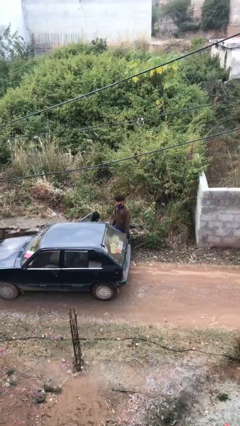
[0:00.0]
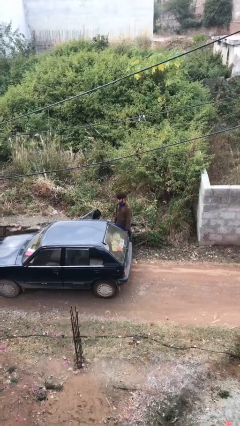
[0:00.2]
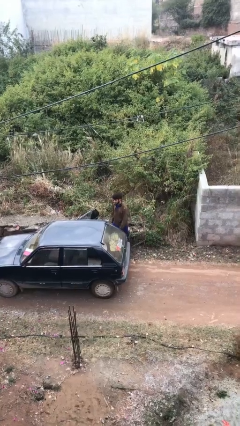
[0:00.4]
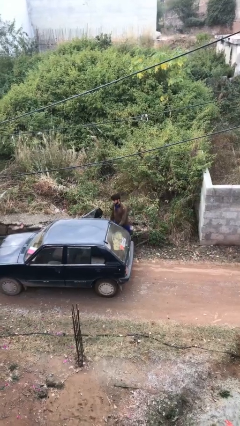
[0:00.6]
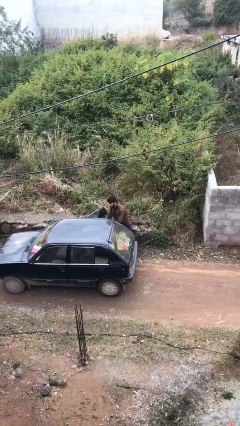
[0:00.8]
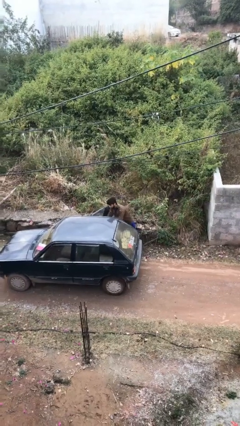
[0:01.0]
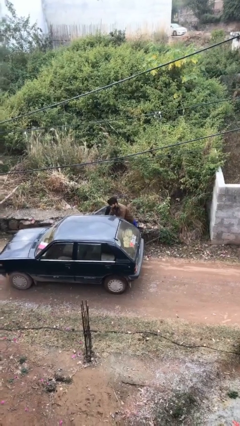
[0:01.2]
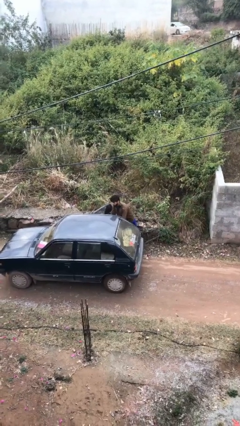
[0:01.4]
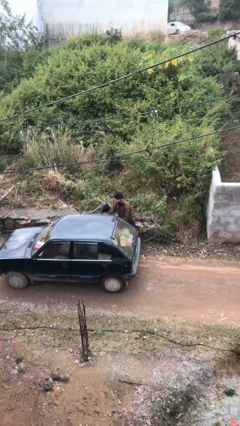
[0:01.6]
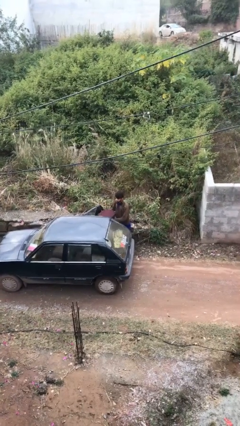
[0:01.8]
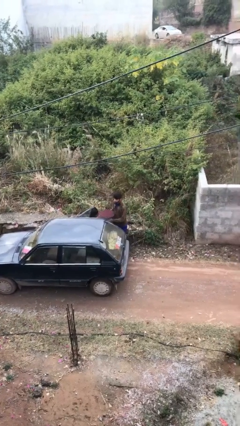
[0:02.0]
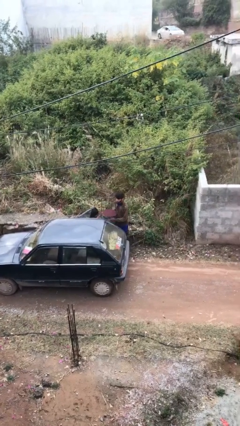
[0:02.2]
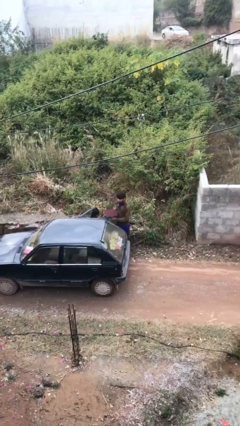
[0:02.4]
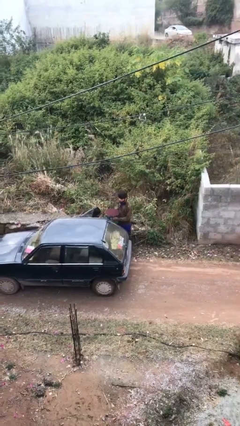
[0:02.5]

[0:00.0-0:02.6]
person unloads car

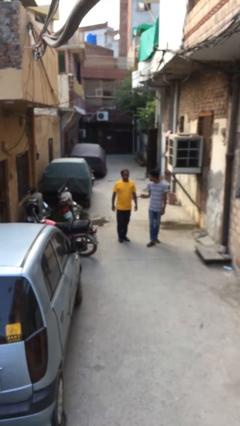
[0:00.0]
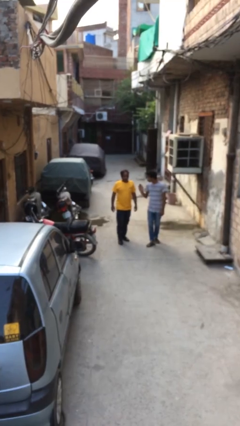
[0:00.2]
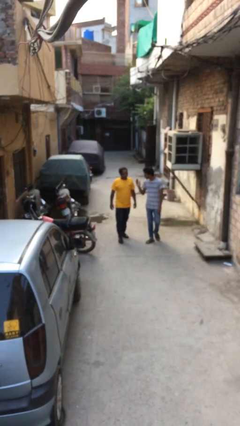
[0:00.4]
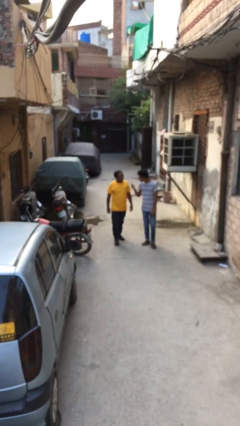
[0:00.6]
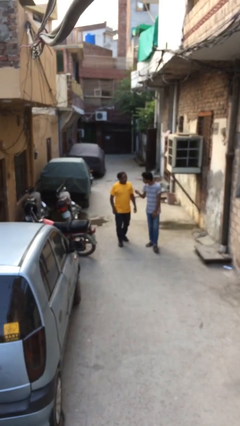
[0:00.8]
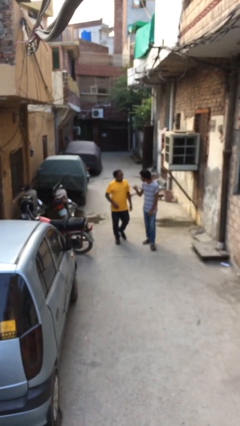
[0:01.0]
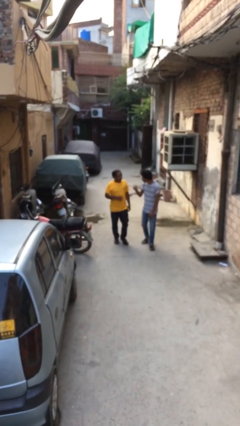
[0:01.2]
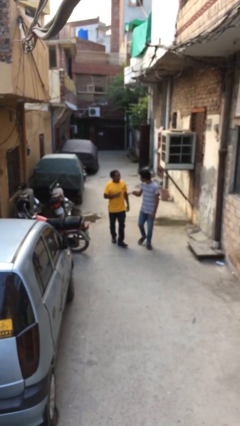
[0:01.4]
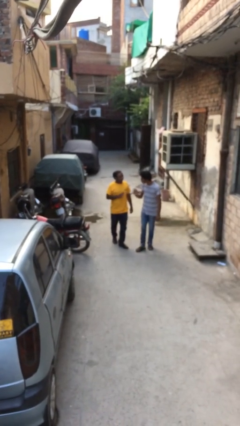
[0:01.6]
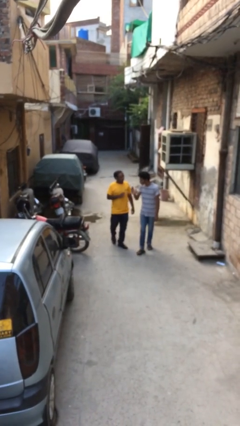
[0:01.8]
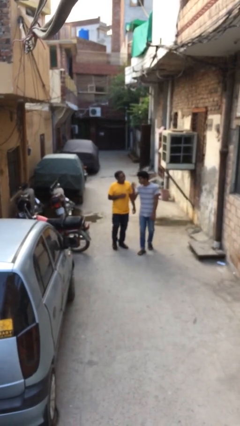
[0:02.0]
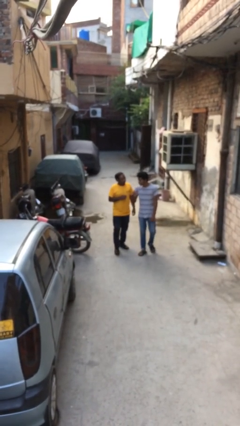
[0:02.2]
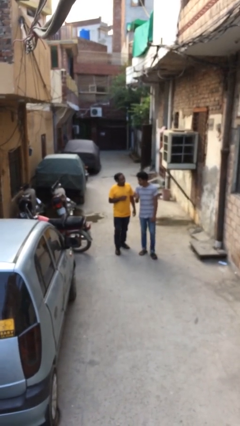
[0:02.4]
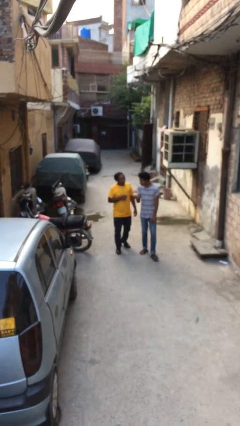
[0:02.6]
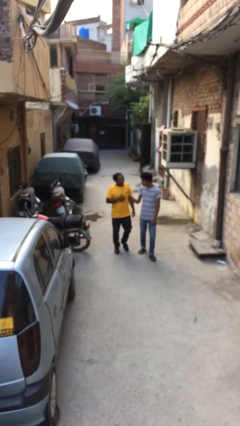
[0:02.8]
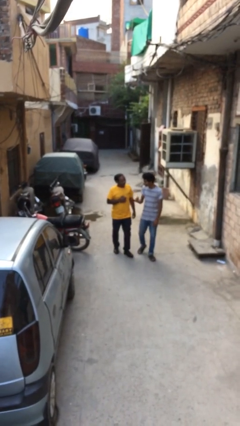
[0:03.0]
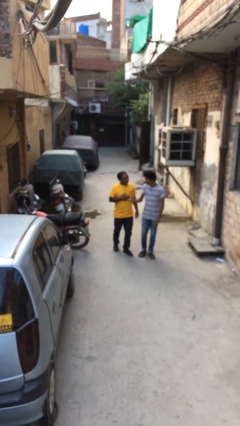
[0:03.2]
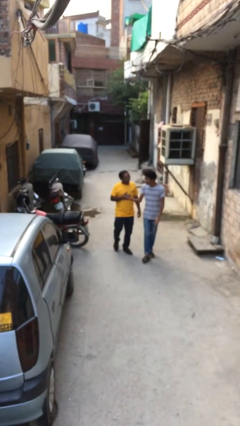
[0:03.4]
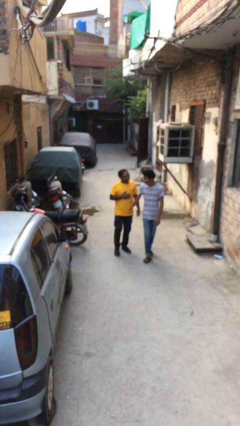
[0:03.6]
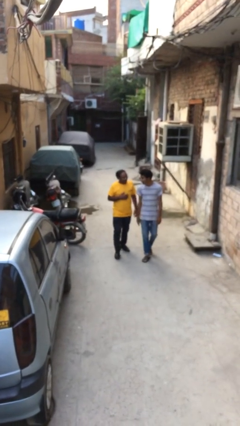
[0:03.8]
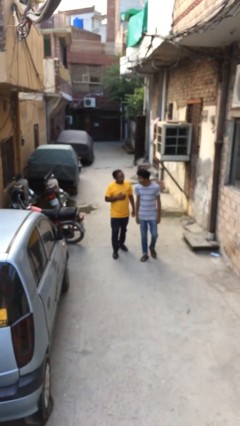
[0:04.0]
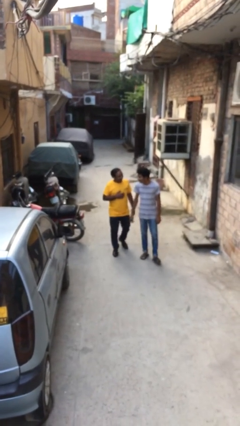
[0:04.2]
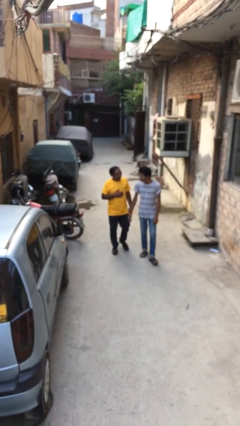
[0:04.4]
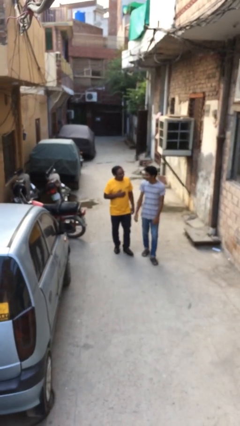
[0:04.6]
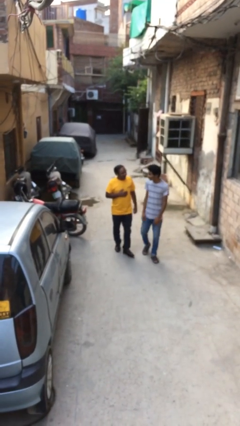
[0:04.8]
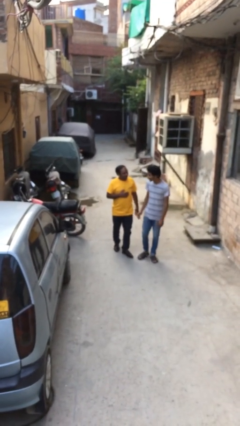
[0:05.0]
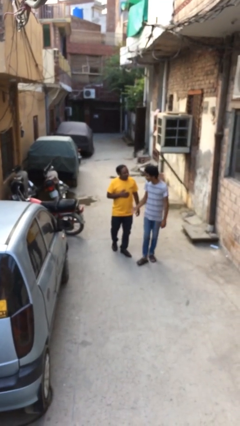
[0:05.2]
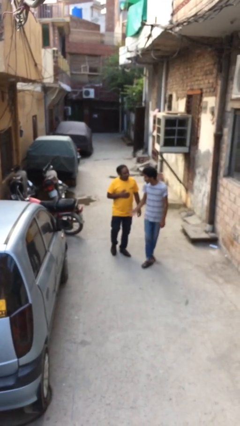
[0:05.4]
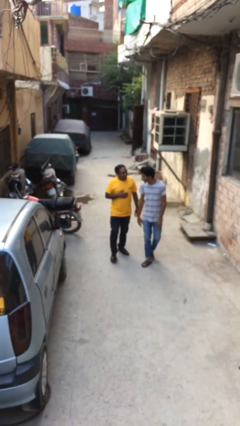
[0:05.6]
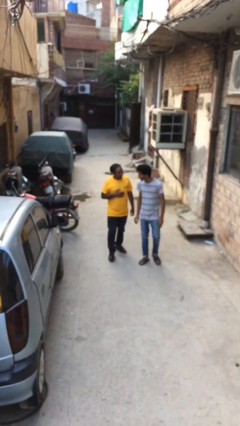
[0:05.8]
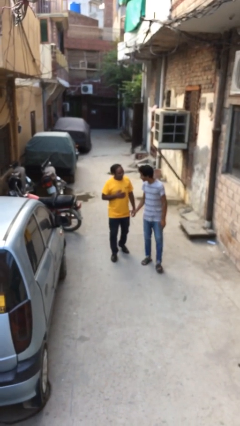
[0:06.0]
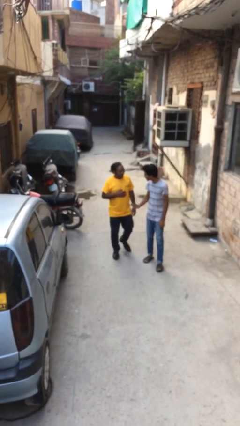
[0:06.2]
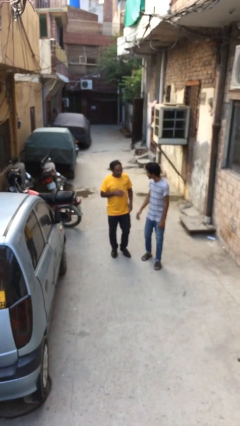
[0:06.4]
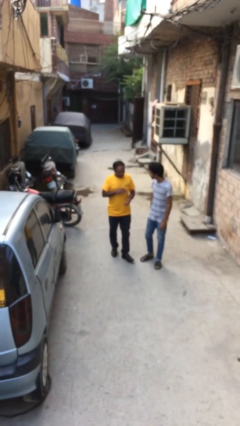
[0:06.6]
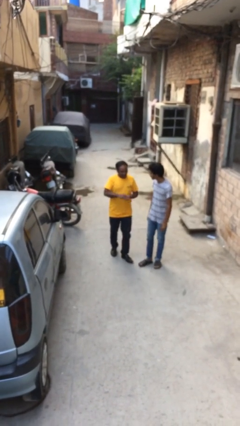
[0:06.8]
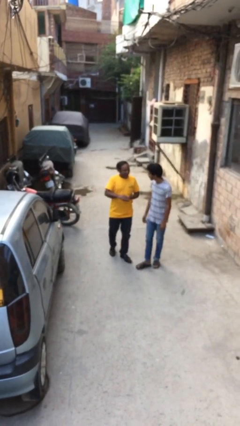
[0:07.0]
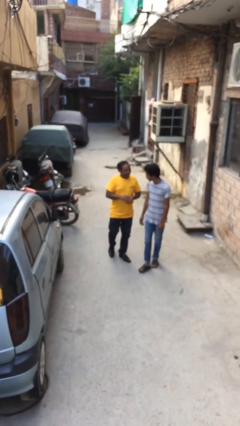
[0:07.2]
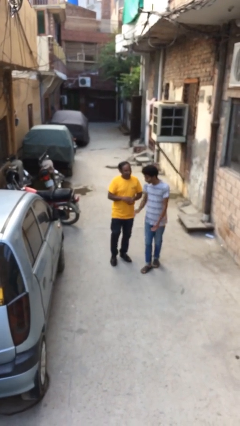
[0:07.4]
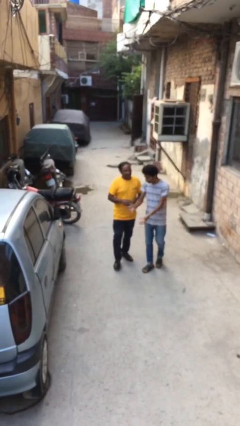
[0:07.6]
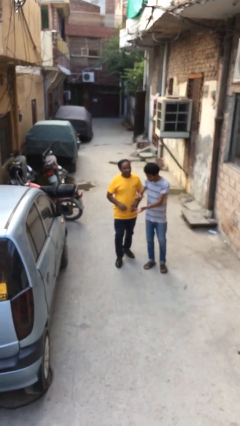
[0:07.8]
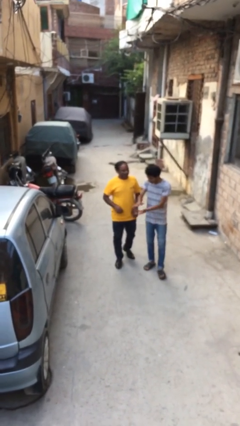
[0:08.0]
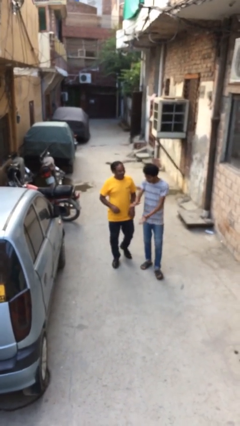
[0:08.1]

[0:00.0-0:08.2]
person talks to person

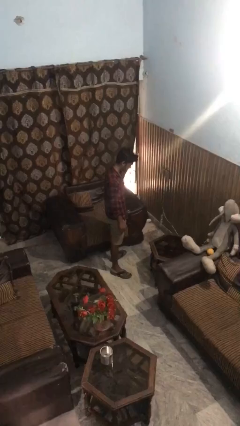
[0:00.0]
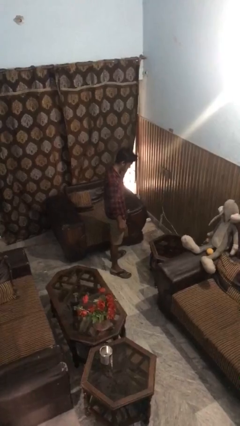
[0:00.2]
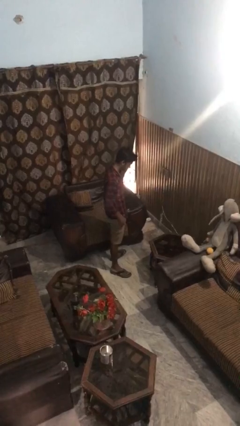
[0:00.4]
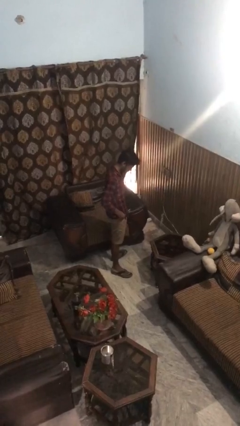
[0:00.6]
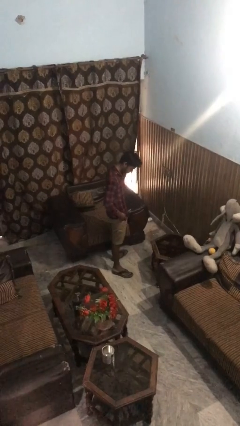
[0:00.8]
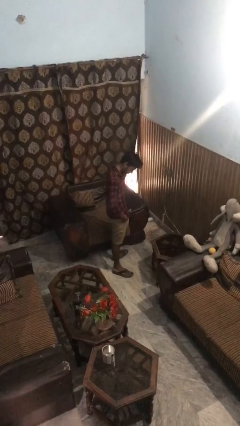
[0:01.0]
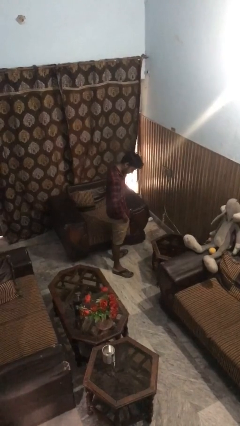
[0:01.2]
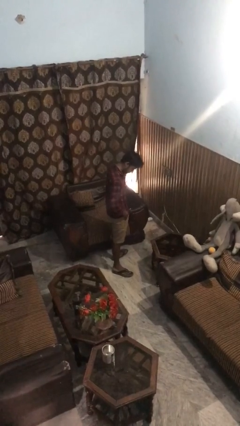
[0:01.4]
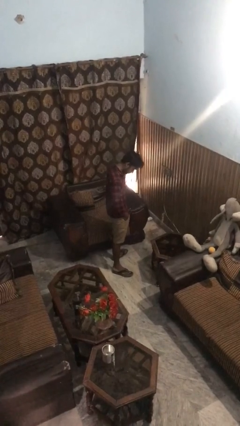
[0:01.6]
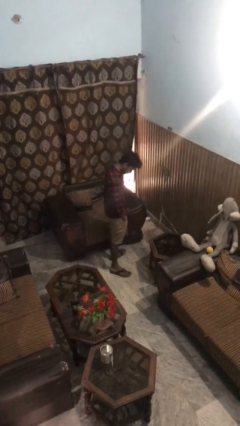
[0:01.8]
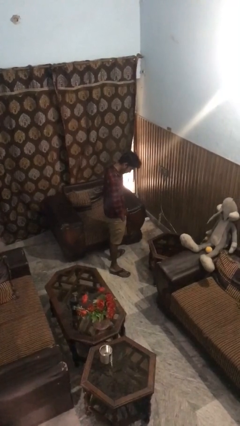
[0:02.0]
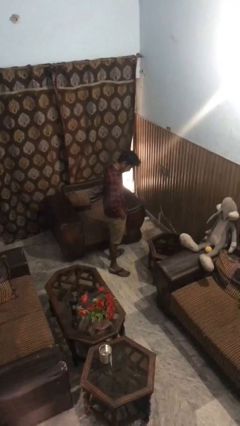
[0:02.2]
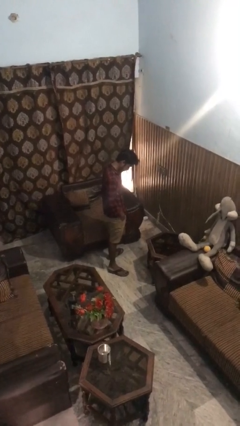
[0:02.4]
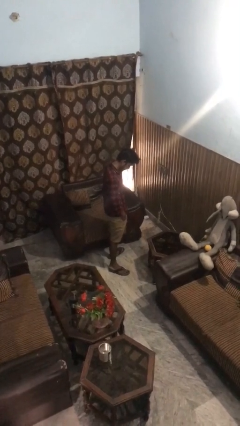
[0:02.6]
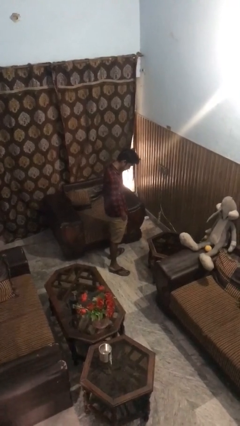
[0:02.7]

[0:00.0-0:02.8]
person puts hands in back pockets

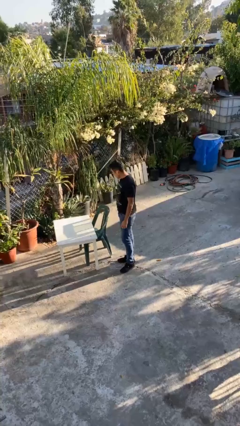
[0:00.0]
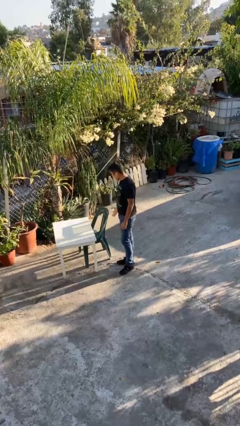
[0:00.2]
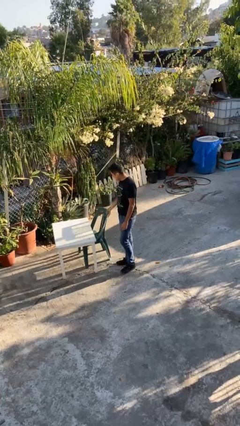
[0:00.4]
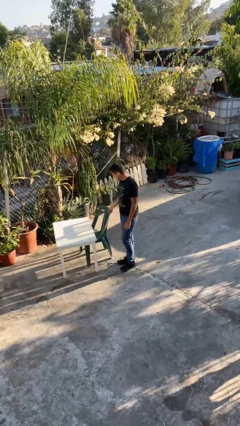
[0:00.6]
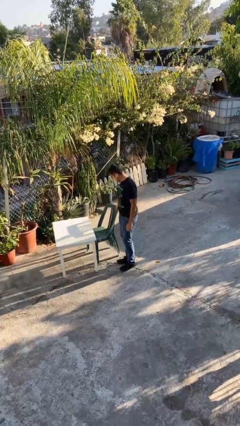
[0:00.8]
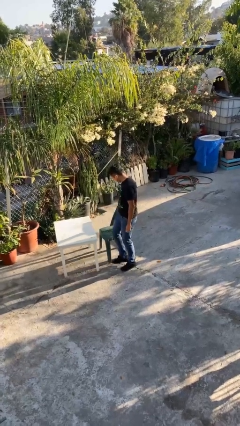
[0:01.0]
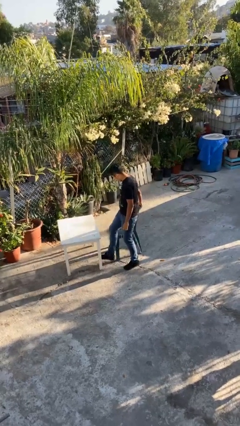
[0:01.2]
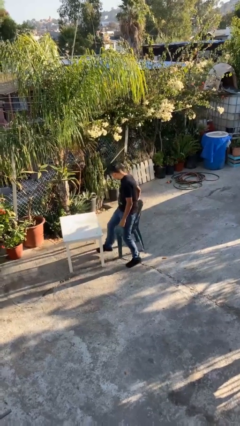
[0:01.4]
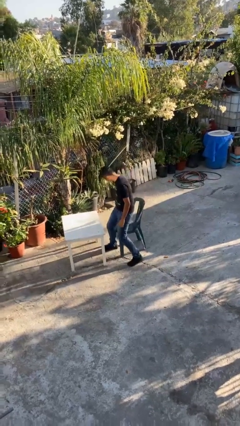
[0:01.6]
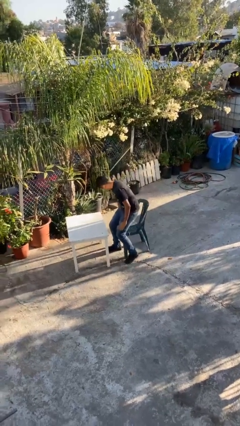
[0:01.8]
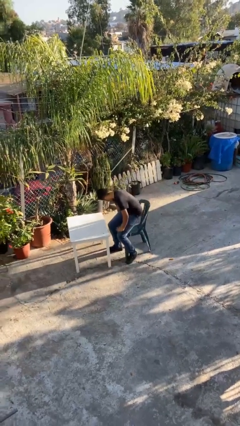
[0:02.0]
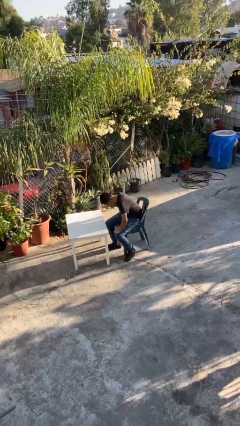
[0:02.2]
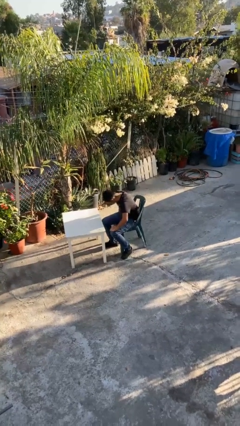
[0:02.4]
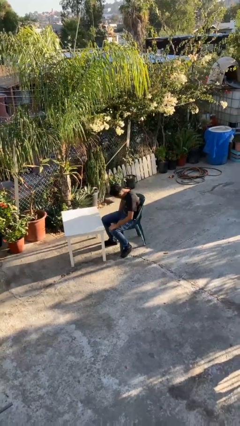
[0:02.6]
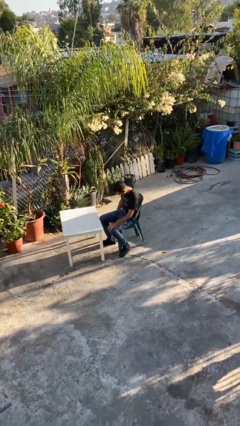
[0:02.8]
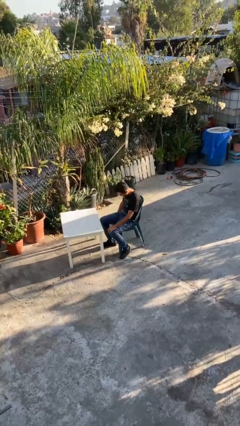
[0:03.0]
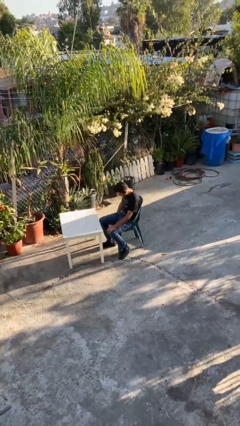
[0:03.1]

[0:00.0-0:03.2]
person sits down

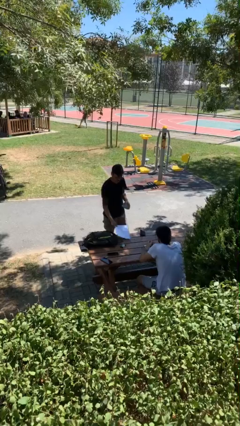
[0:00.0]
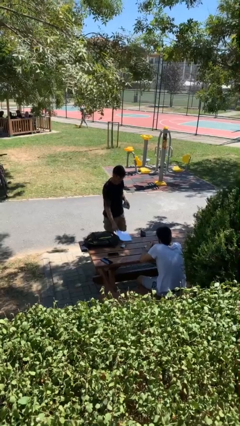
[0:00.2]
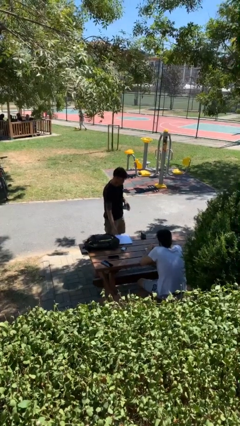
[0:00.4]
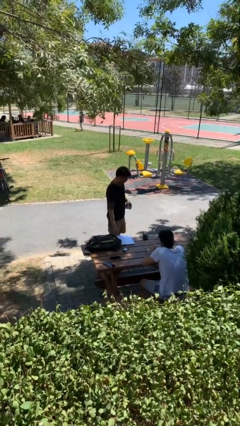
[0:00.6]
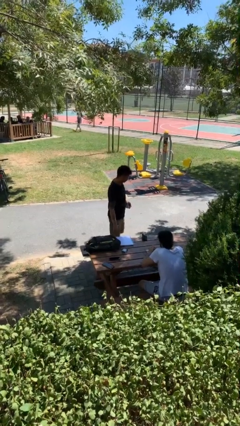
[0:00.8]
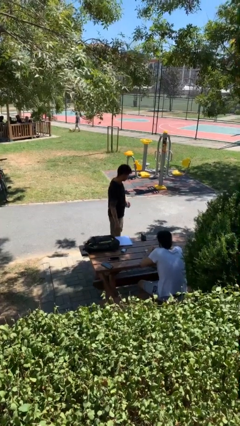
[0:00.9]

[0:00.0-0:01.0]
person puts down object on table
